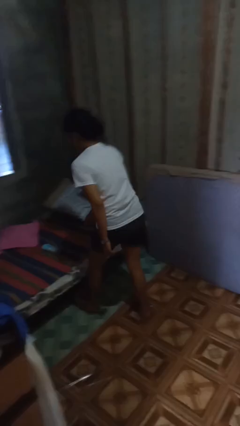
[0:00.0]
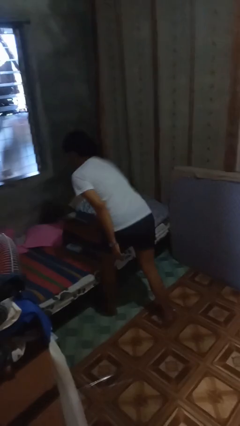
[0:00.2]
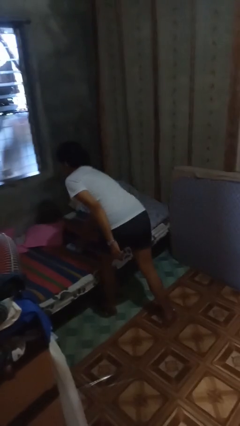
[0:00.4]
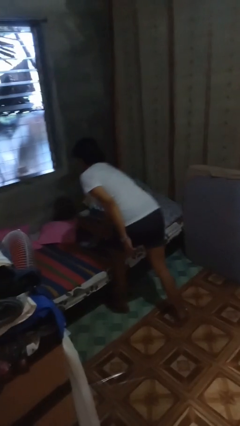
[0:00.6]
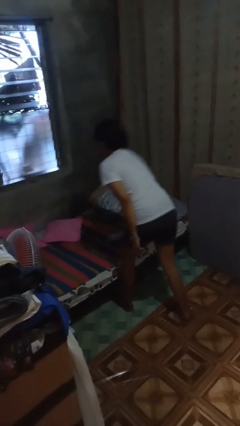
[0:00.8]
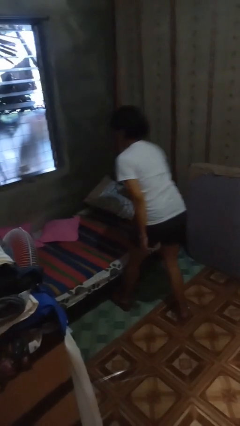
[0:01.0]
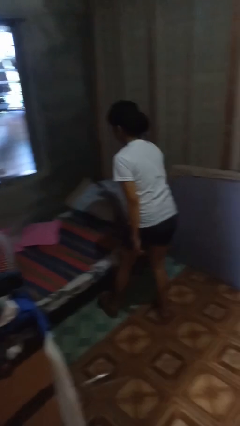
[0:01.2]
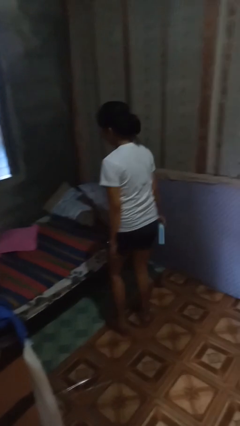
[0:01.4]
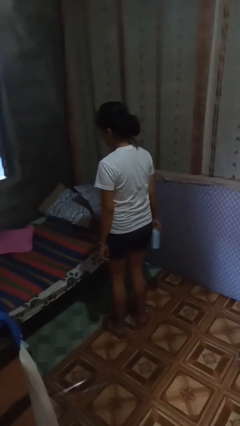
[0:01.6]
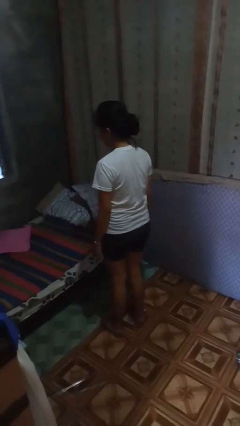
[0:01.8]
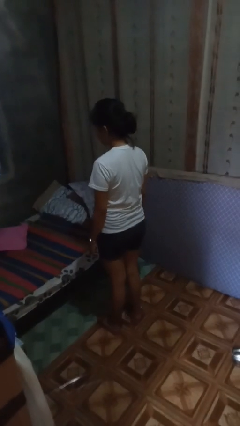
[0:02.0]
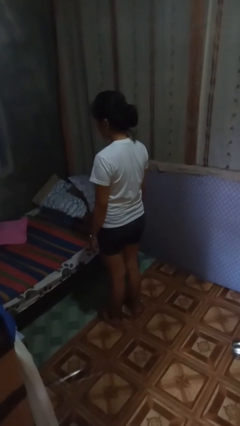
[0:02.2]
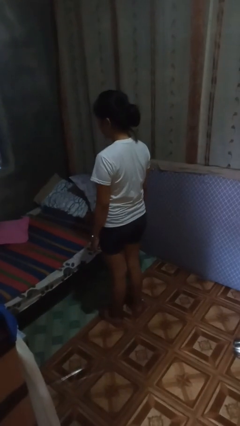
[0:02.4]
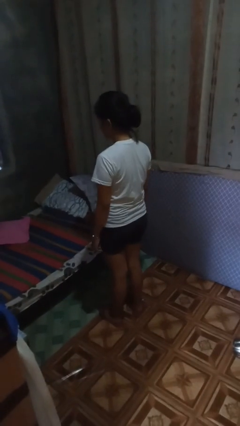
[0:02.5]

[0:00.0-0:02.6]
person picks up object from bed

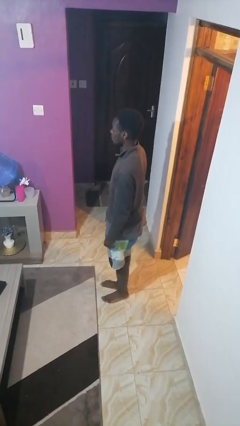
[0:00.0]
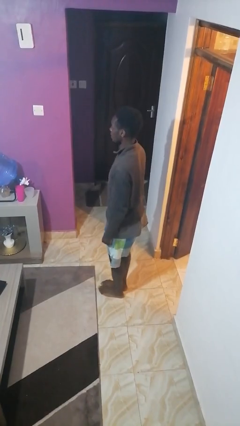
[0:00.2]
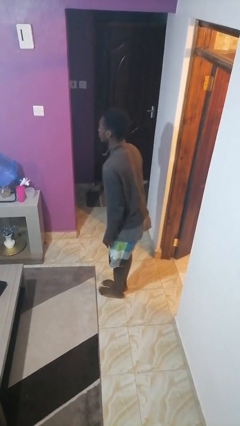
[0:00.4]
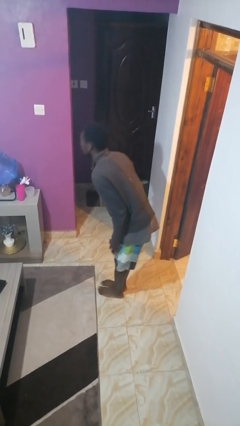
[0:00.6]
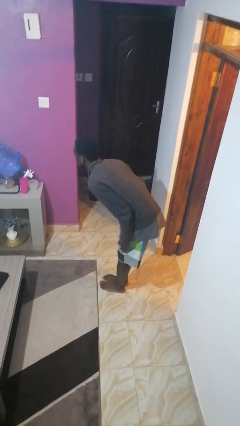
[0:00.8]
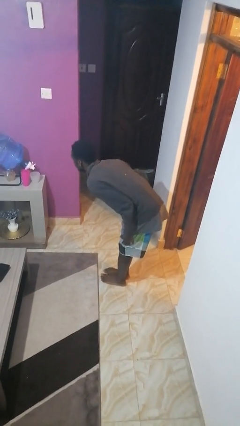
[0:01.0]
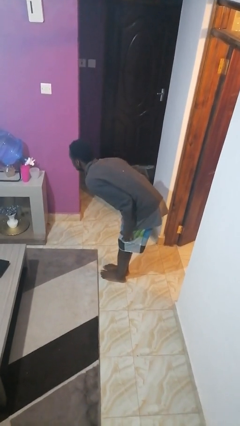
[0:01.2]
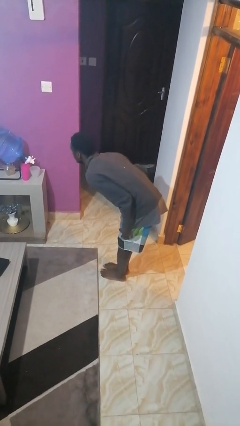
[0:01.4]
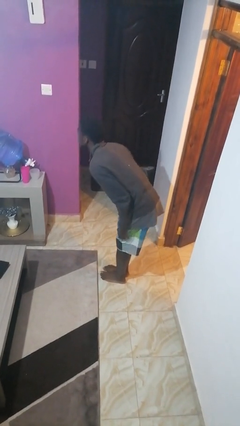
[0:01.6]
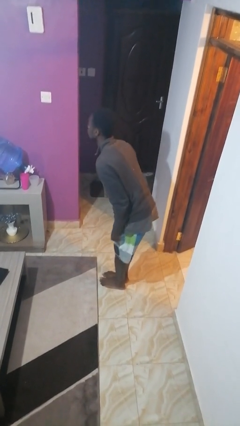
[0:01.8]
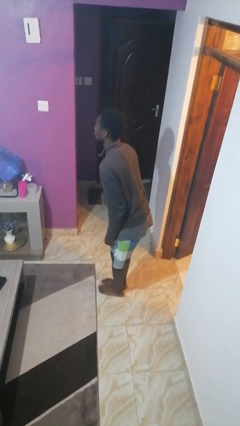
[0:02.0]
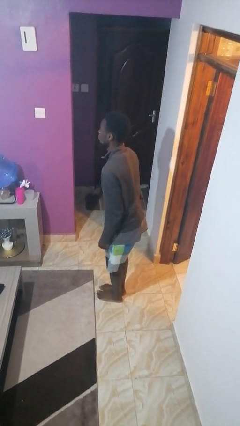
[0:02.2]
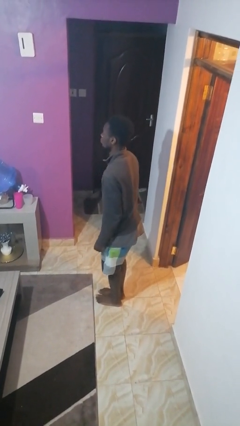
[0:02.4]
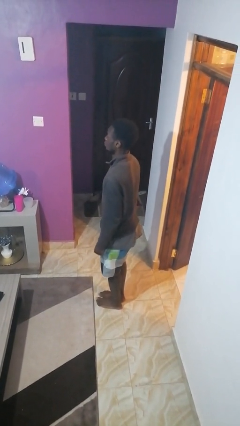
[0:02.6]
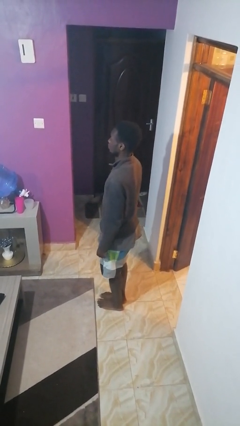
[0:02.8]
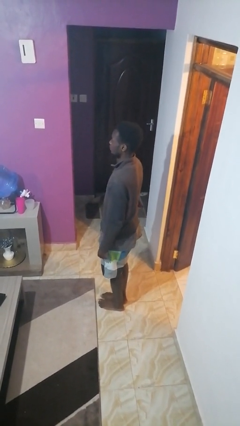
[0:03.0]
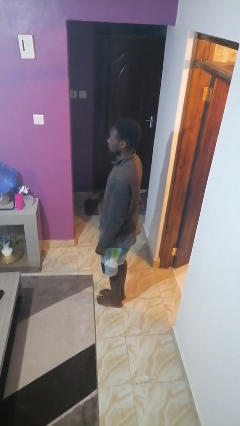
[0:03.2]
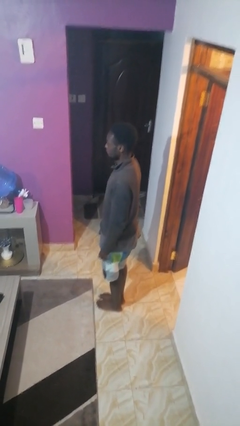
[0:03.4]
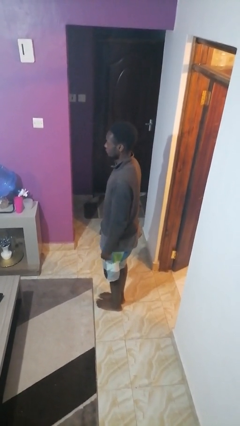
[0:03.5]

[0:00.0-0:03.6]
person bows

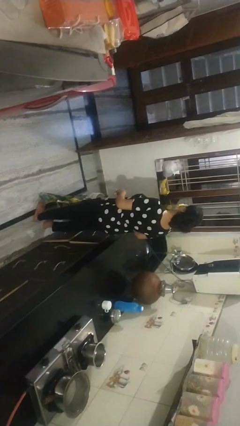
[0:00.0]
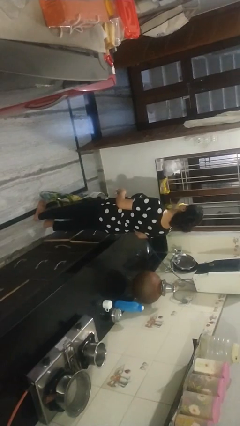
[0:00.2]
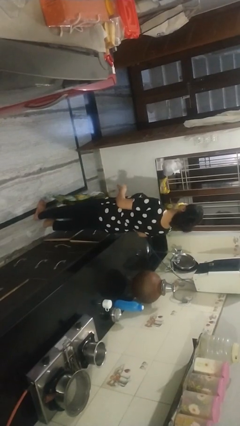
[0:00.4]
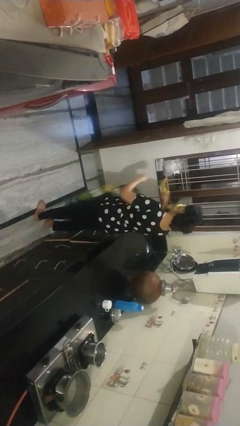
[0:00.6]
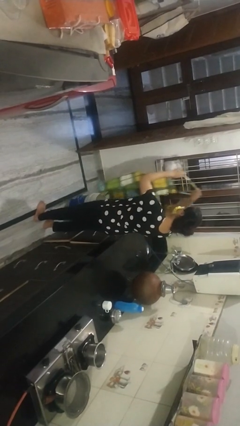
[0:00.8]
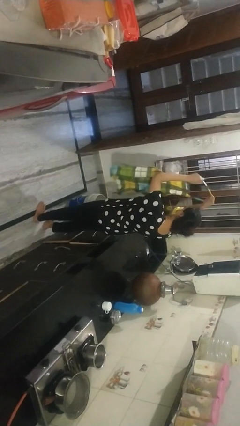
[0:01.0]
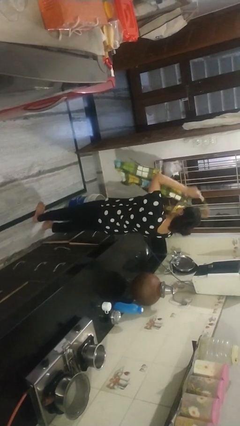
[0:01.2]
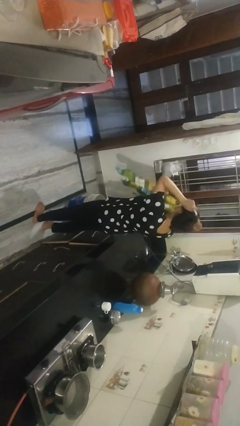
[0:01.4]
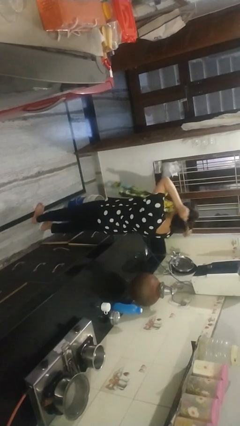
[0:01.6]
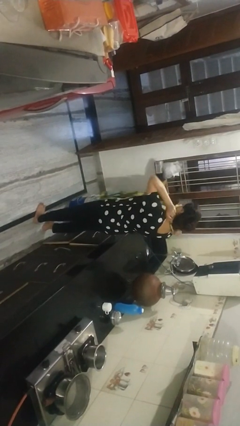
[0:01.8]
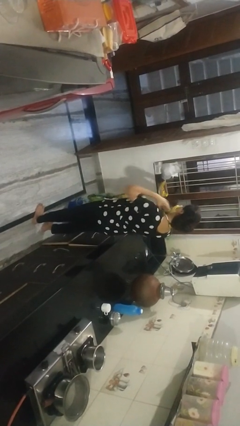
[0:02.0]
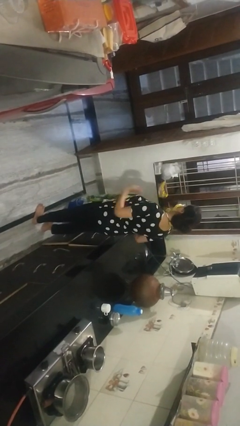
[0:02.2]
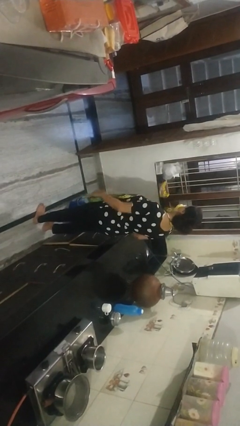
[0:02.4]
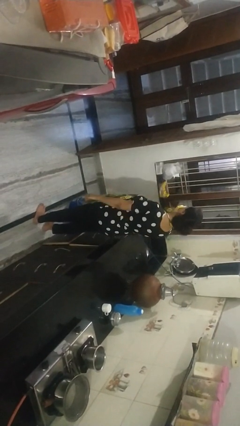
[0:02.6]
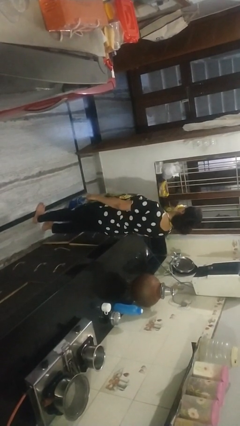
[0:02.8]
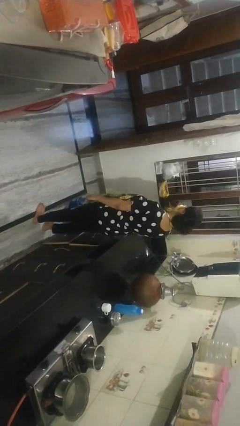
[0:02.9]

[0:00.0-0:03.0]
person puts on apron

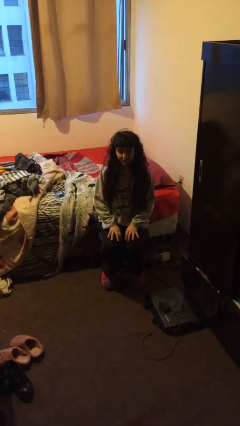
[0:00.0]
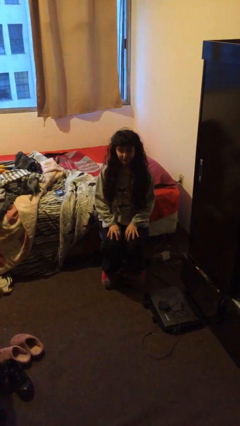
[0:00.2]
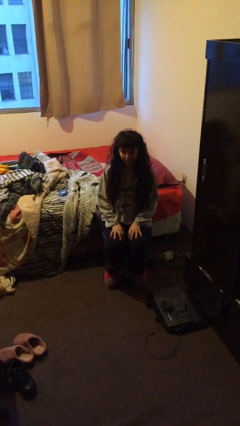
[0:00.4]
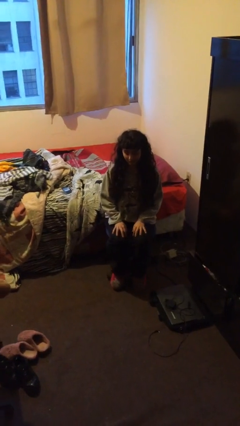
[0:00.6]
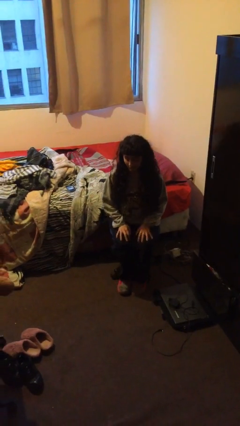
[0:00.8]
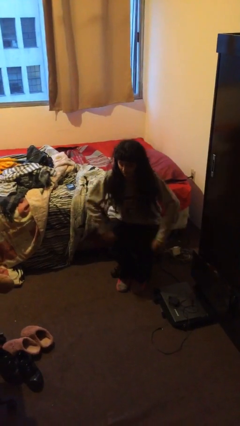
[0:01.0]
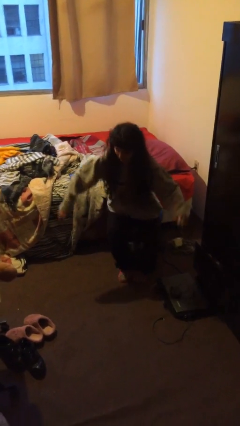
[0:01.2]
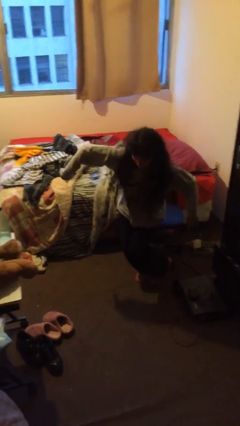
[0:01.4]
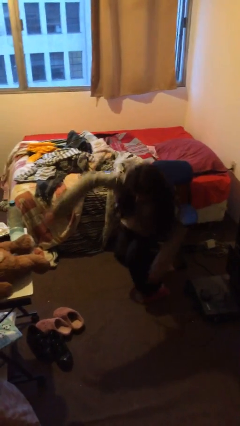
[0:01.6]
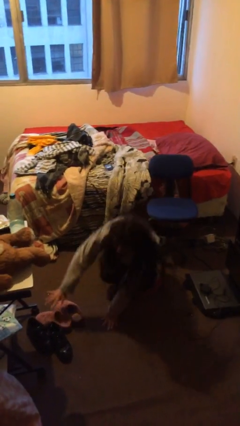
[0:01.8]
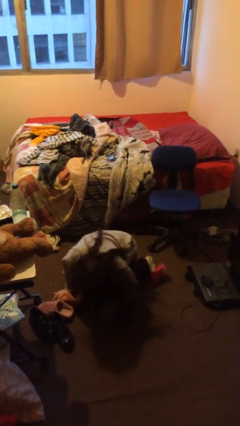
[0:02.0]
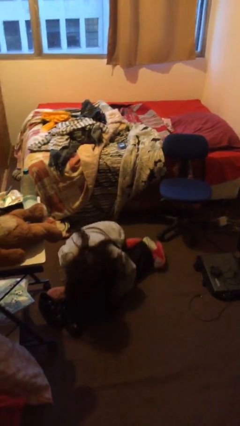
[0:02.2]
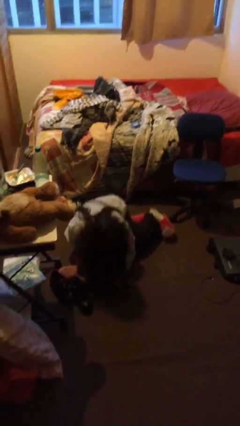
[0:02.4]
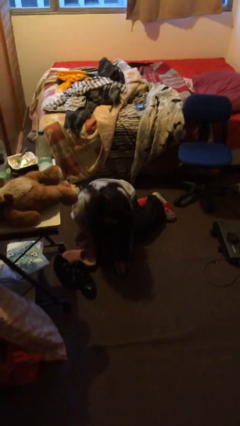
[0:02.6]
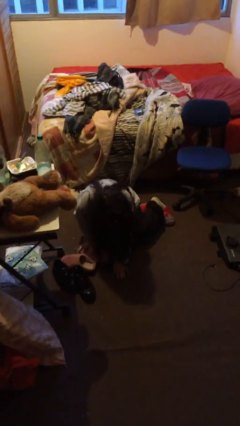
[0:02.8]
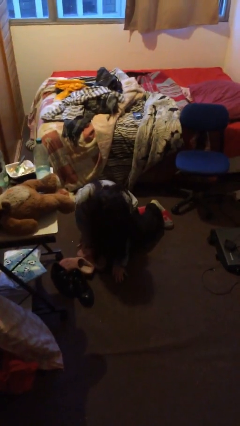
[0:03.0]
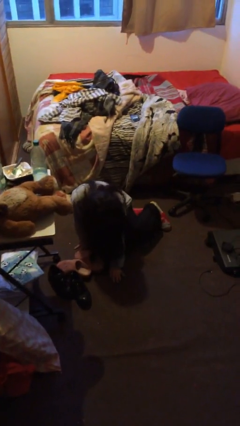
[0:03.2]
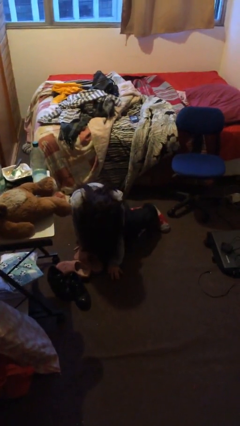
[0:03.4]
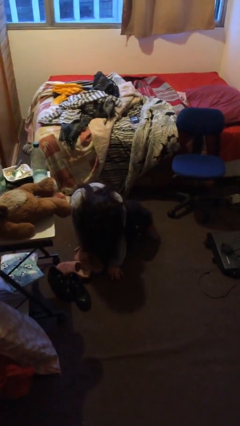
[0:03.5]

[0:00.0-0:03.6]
person falls from chair

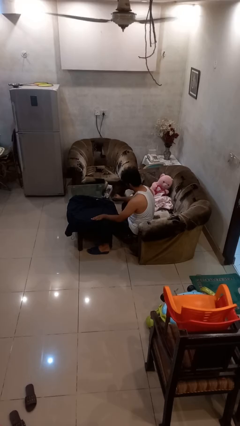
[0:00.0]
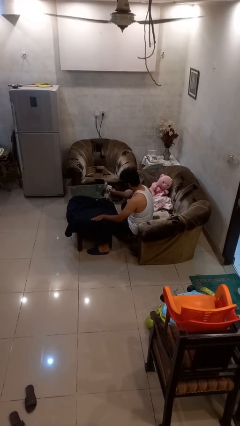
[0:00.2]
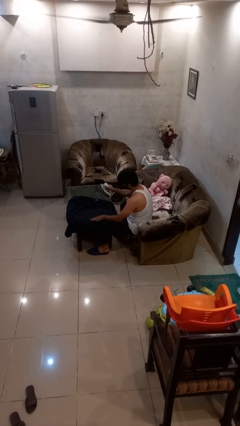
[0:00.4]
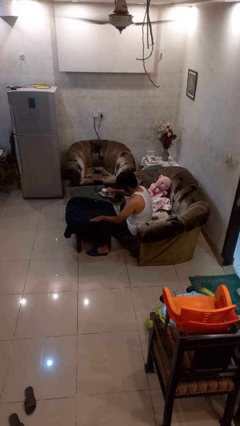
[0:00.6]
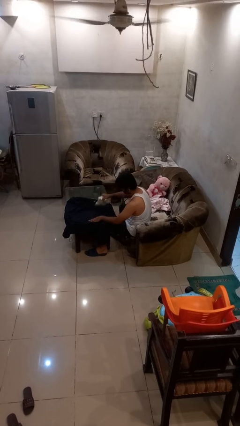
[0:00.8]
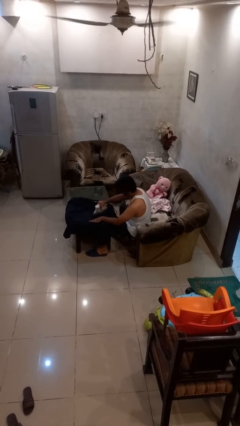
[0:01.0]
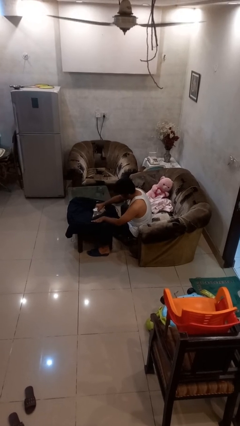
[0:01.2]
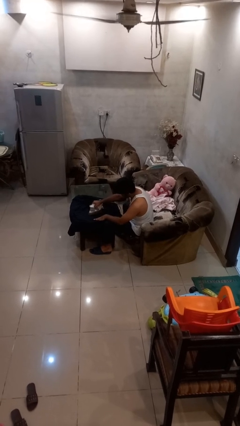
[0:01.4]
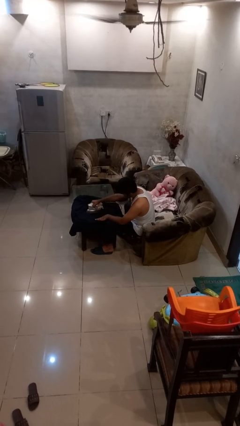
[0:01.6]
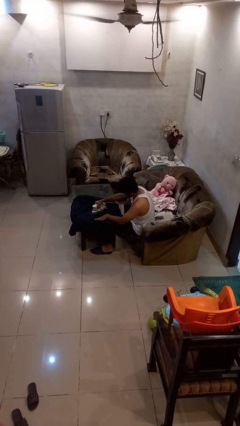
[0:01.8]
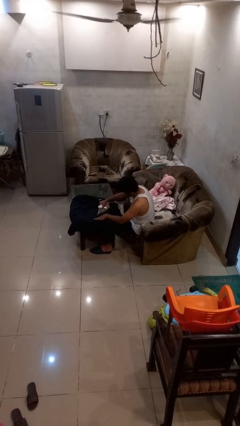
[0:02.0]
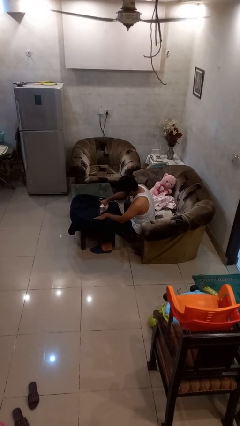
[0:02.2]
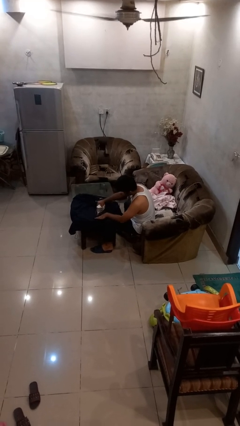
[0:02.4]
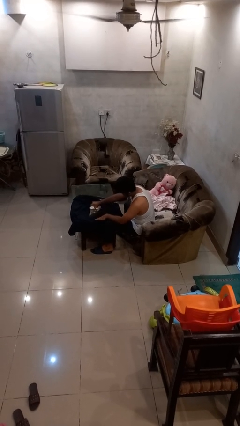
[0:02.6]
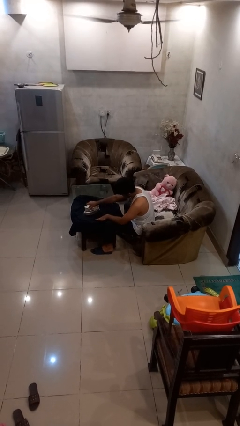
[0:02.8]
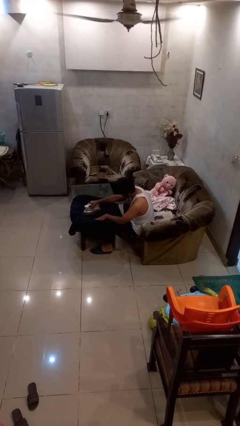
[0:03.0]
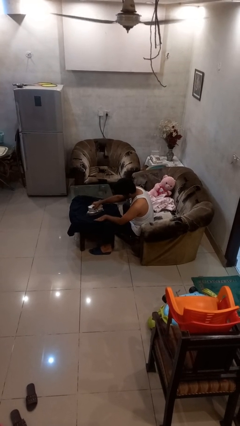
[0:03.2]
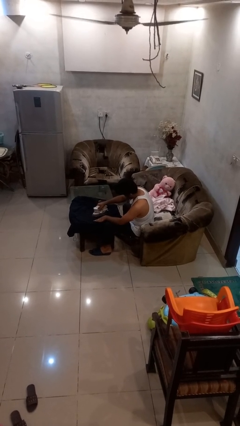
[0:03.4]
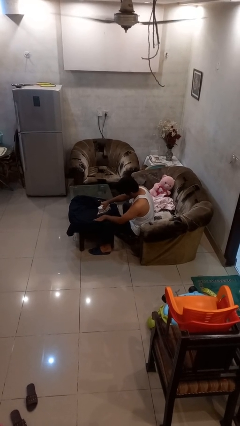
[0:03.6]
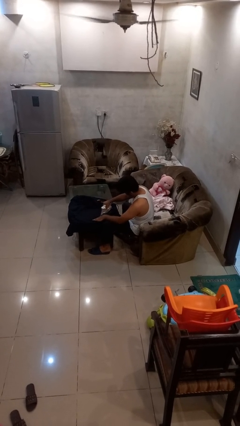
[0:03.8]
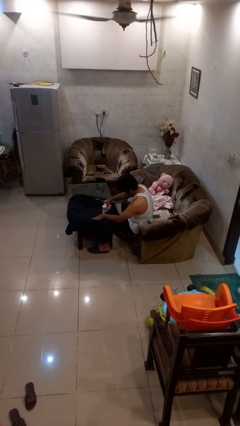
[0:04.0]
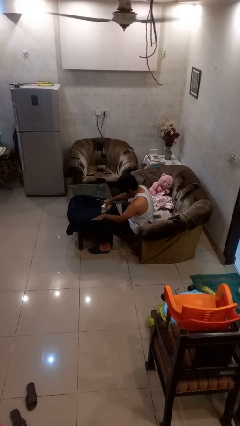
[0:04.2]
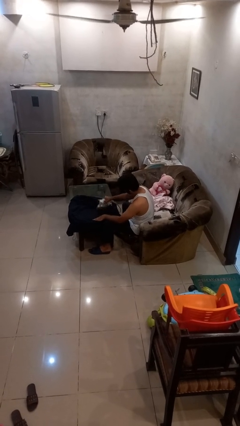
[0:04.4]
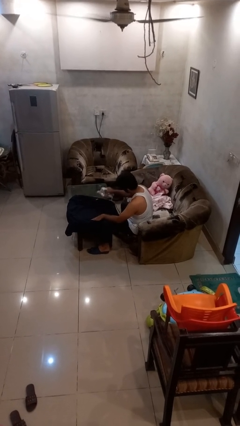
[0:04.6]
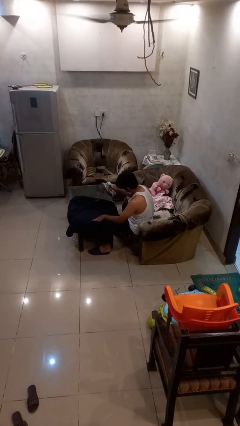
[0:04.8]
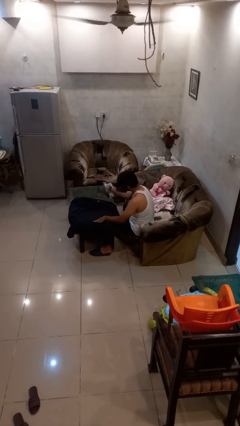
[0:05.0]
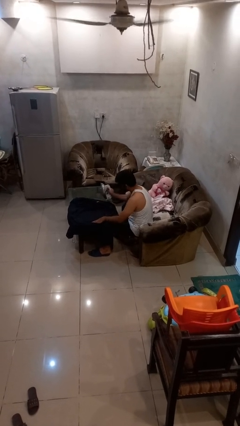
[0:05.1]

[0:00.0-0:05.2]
person irons clothes
